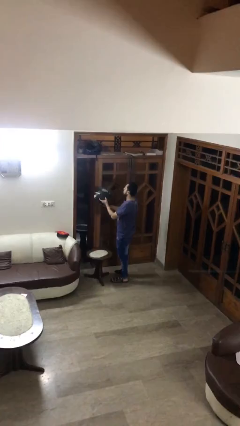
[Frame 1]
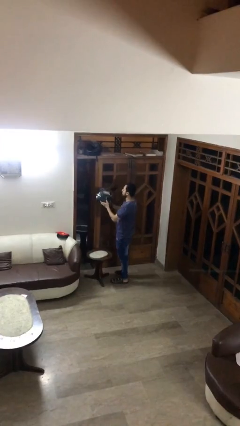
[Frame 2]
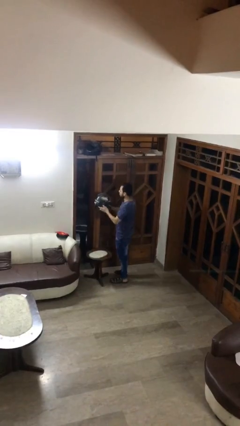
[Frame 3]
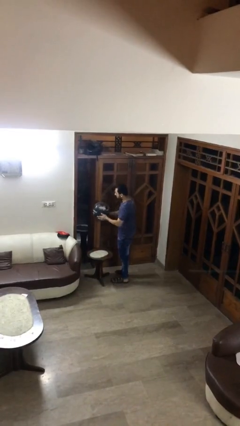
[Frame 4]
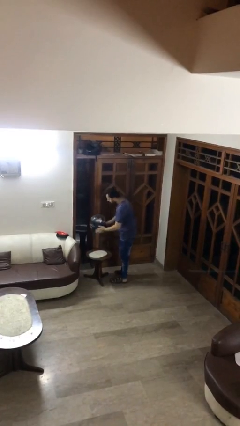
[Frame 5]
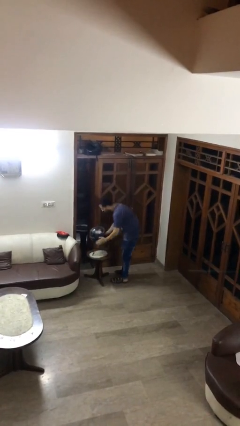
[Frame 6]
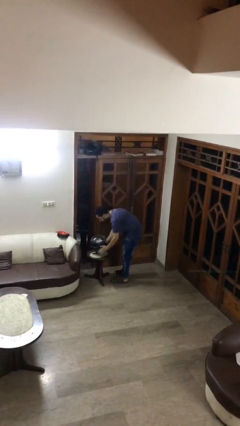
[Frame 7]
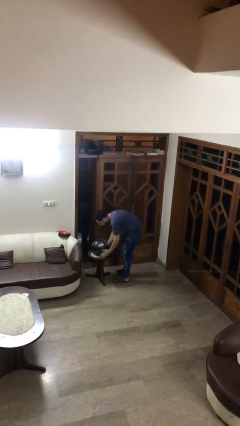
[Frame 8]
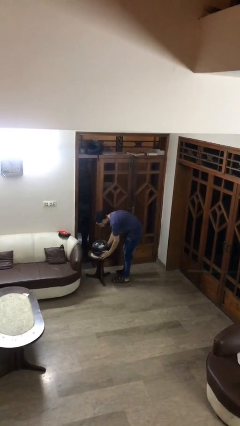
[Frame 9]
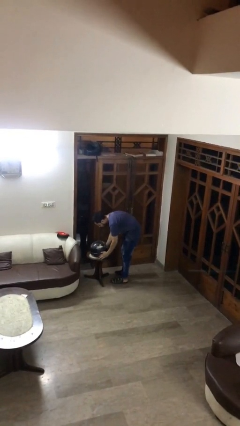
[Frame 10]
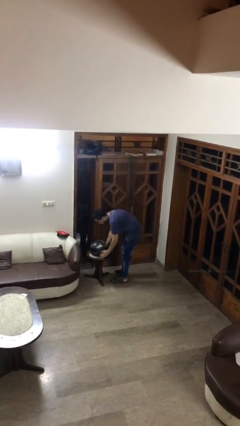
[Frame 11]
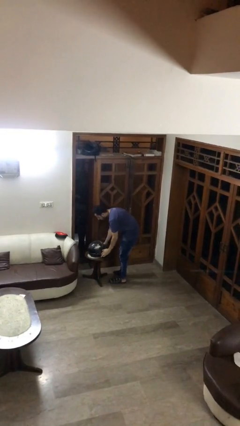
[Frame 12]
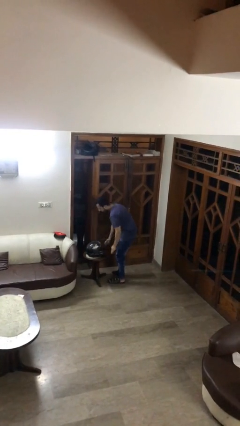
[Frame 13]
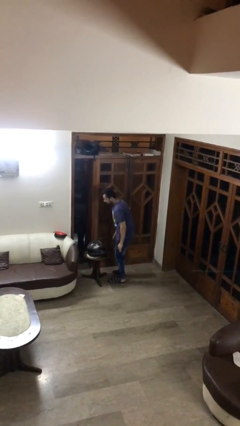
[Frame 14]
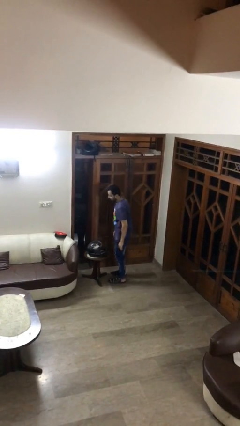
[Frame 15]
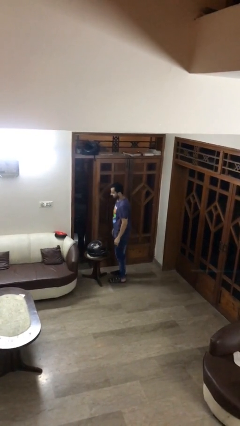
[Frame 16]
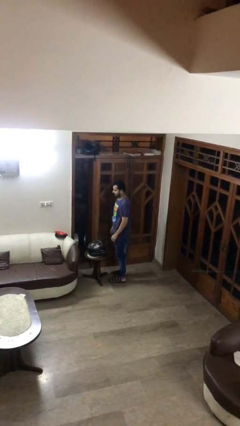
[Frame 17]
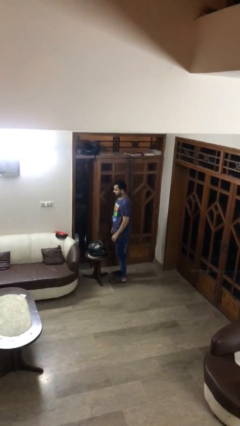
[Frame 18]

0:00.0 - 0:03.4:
person puts down object on table

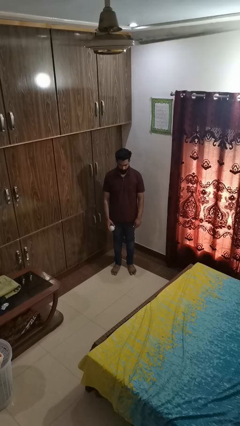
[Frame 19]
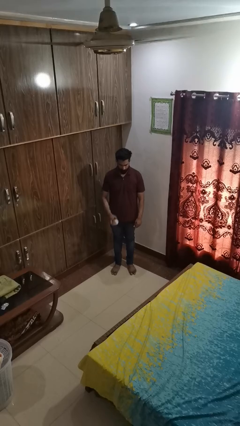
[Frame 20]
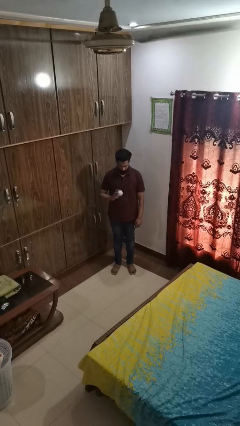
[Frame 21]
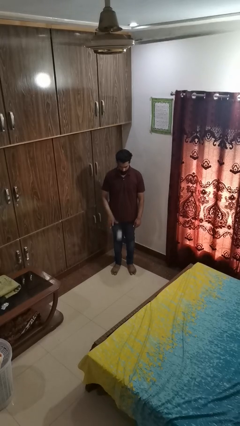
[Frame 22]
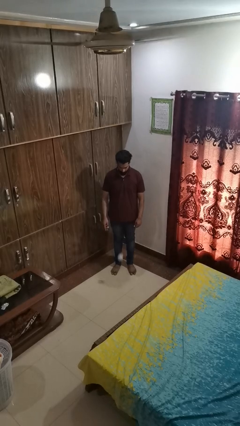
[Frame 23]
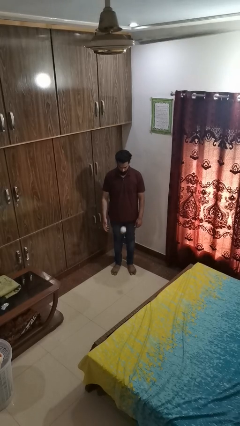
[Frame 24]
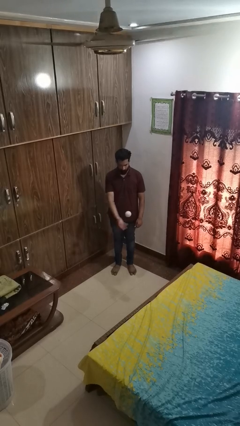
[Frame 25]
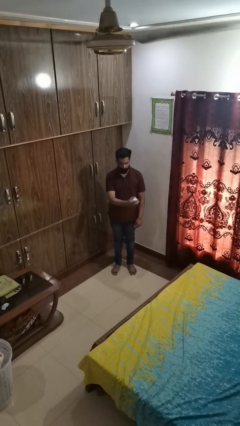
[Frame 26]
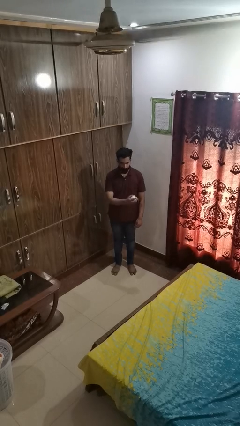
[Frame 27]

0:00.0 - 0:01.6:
person bounces ball on floor

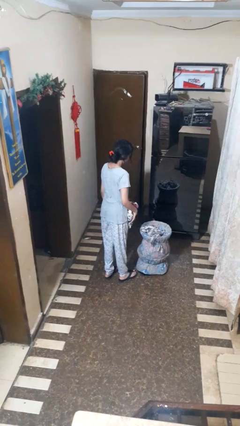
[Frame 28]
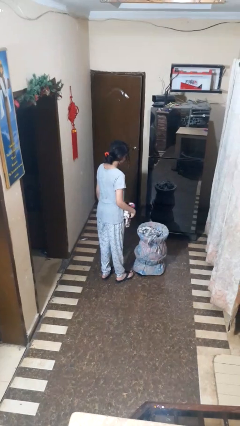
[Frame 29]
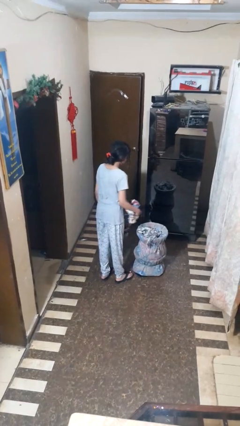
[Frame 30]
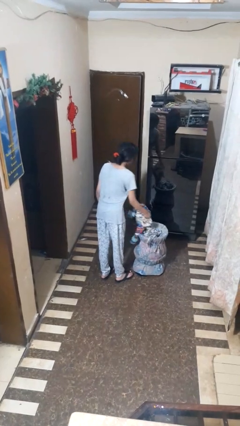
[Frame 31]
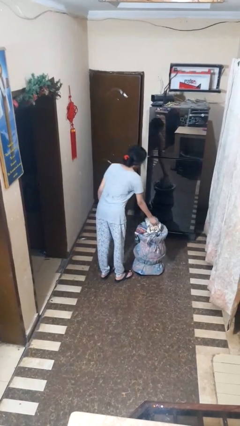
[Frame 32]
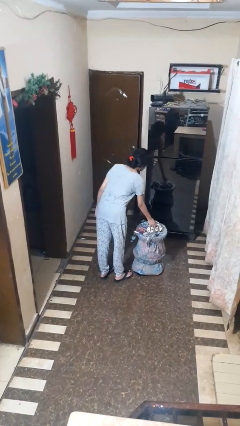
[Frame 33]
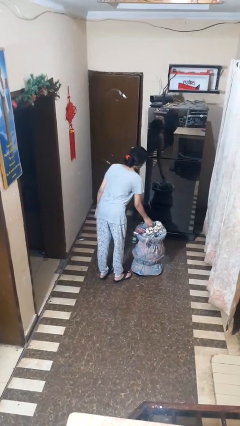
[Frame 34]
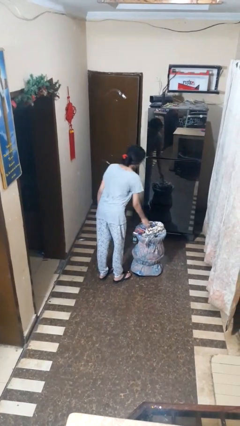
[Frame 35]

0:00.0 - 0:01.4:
person puts object into basket

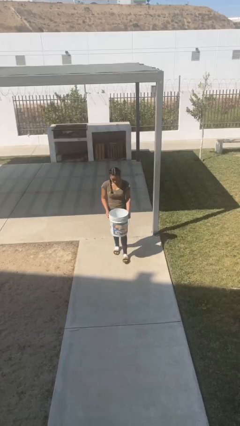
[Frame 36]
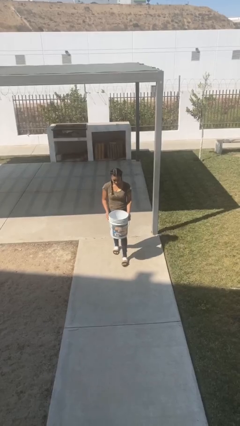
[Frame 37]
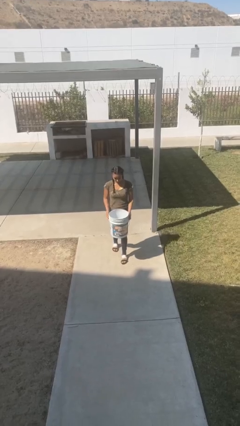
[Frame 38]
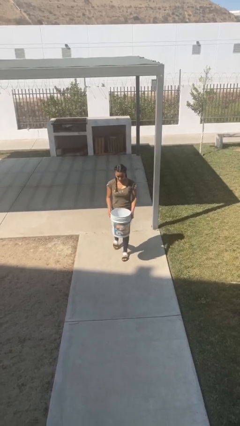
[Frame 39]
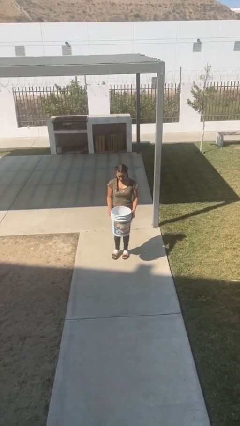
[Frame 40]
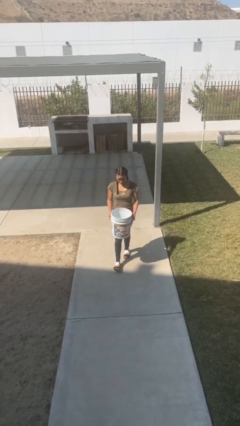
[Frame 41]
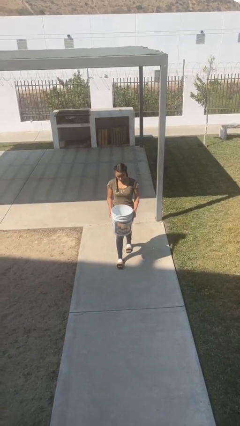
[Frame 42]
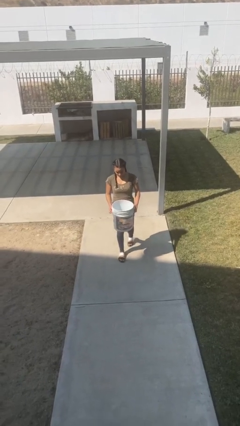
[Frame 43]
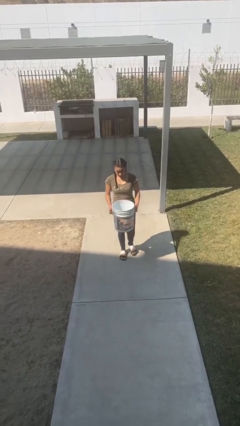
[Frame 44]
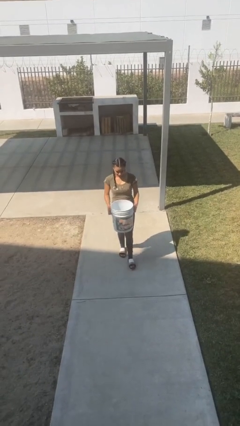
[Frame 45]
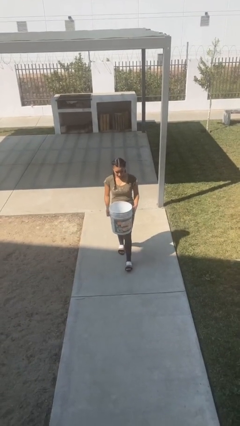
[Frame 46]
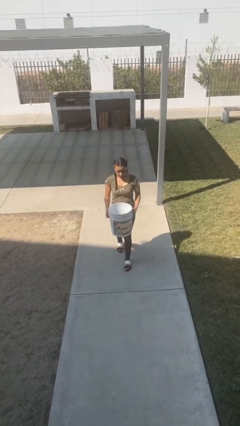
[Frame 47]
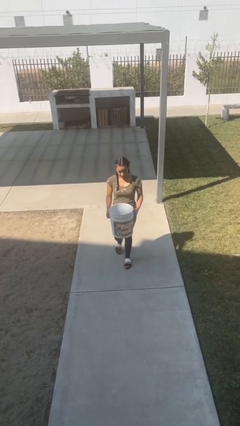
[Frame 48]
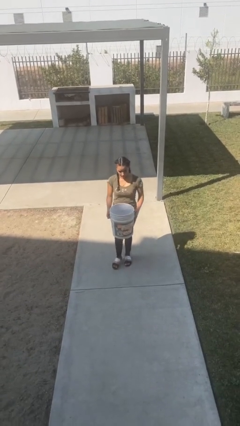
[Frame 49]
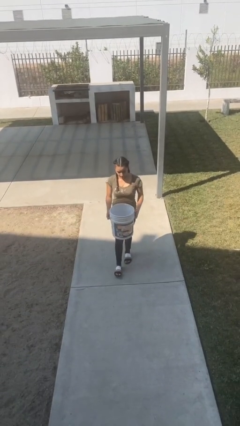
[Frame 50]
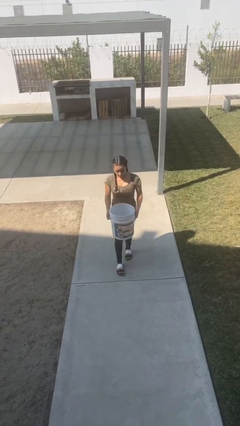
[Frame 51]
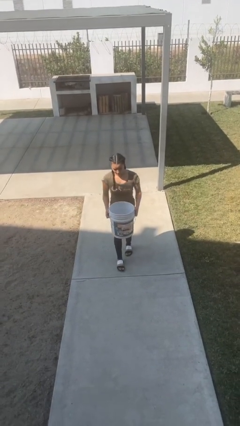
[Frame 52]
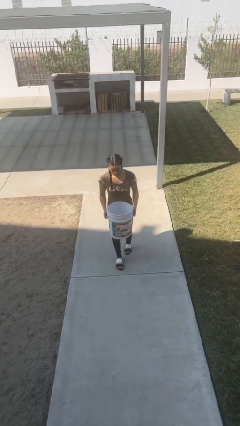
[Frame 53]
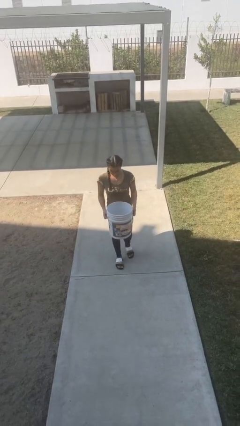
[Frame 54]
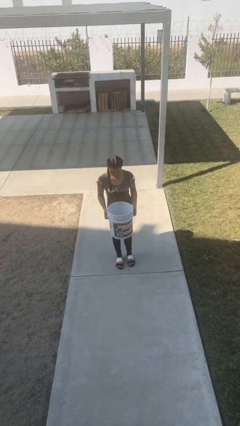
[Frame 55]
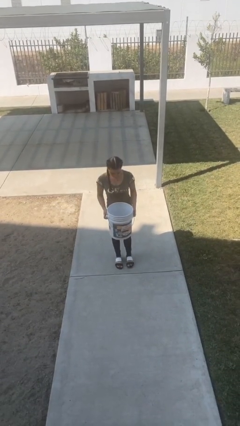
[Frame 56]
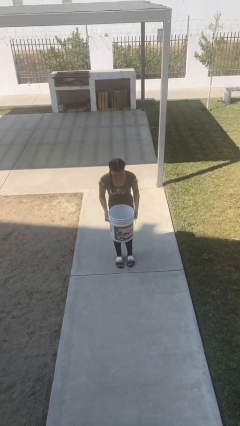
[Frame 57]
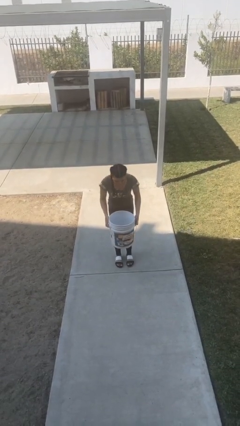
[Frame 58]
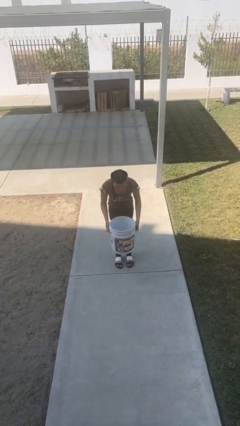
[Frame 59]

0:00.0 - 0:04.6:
person carries heavy object

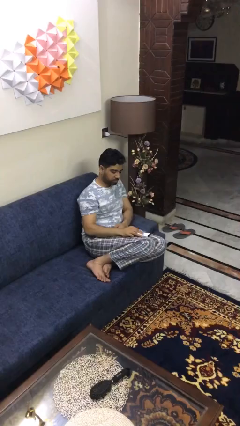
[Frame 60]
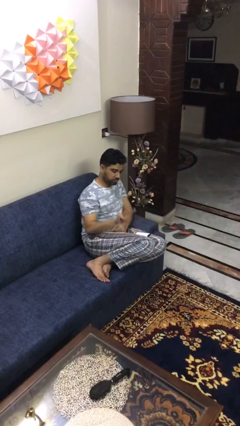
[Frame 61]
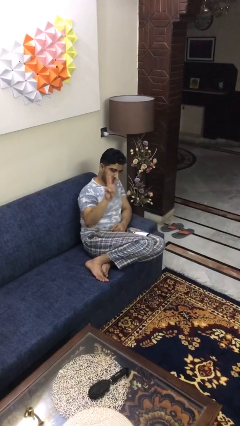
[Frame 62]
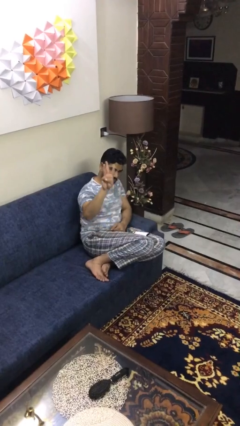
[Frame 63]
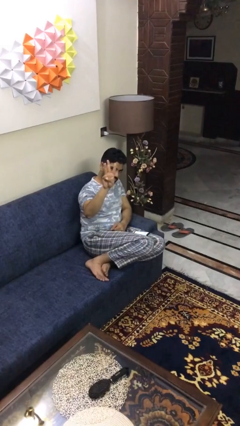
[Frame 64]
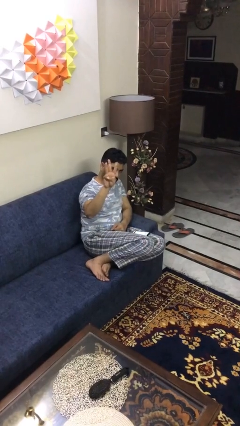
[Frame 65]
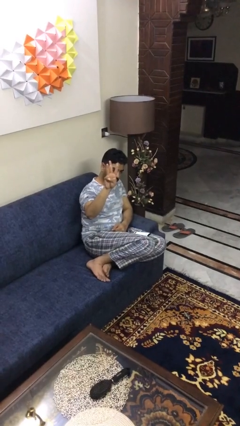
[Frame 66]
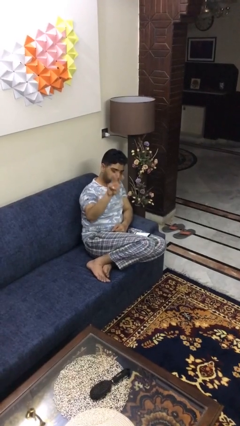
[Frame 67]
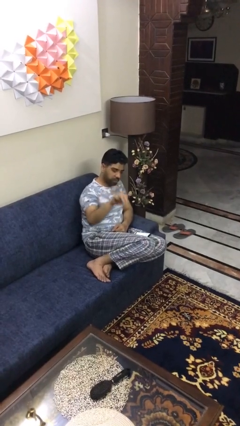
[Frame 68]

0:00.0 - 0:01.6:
person gestures number three

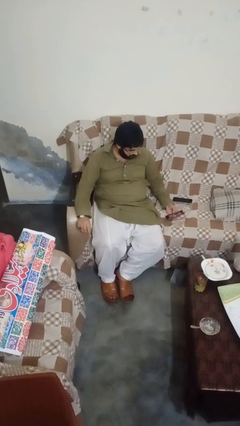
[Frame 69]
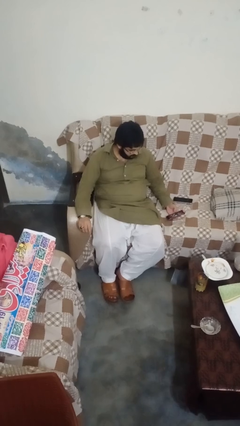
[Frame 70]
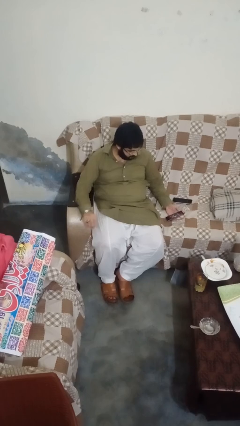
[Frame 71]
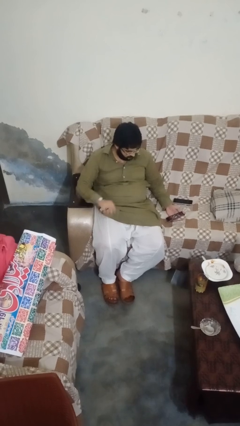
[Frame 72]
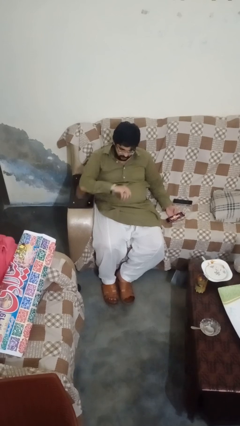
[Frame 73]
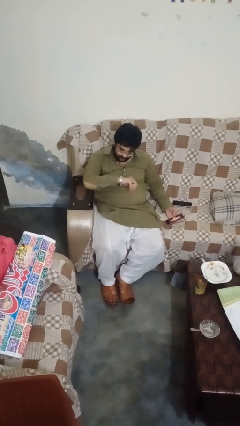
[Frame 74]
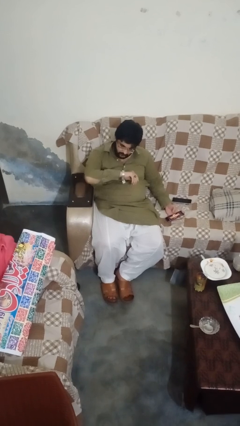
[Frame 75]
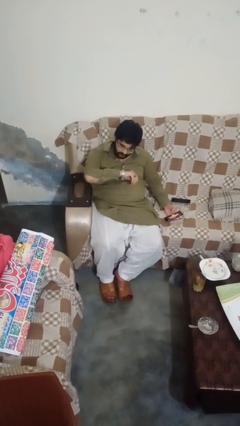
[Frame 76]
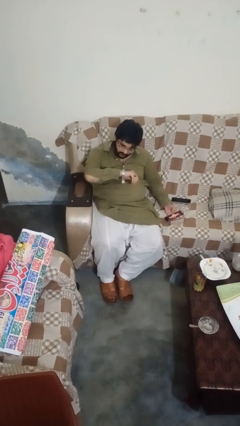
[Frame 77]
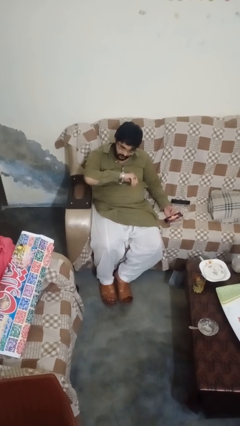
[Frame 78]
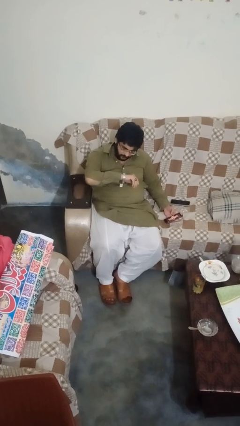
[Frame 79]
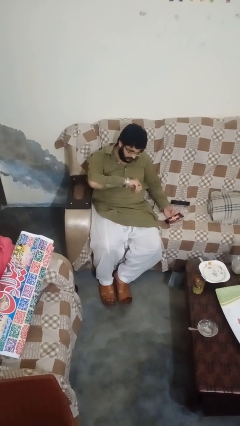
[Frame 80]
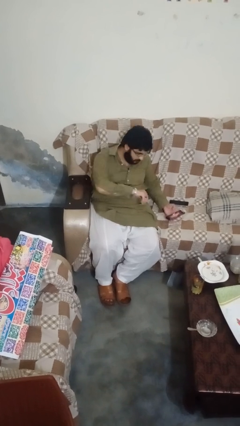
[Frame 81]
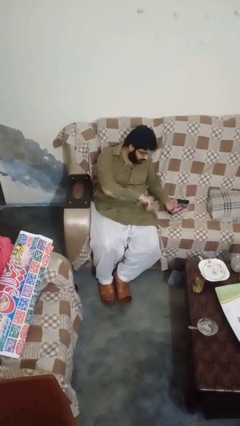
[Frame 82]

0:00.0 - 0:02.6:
person looks at wristwatch

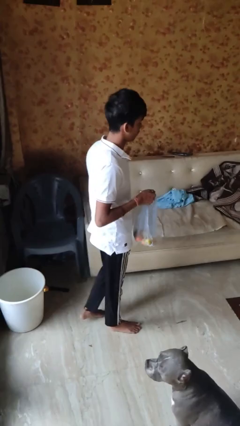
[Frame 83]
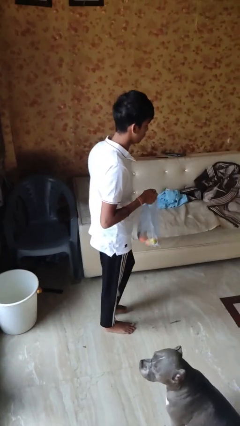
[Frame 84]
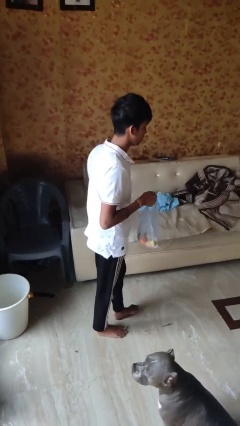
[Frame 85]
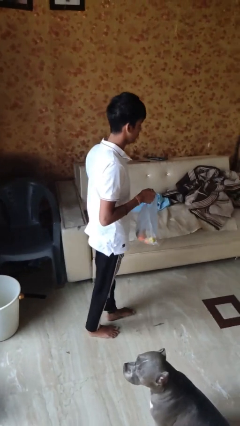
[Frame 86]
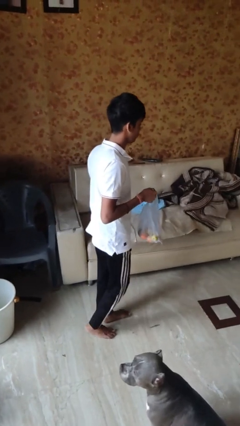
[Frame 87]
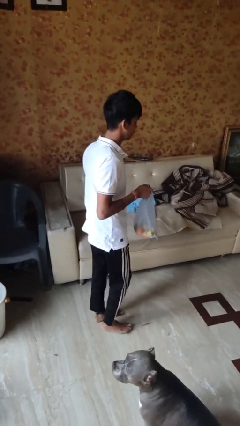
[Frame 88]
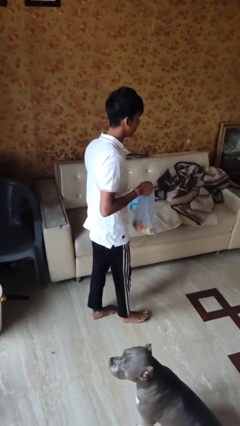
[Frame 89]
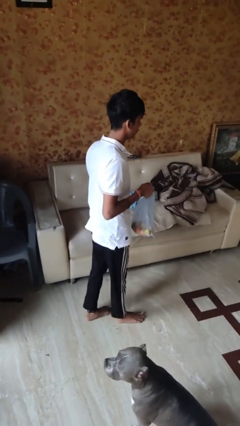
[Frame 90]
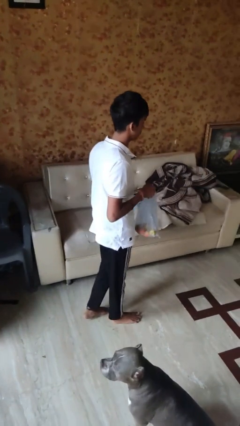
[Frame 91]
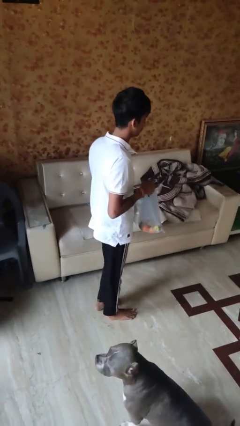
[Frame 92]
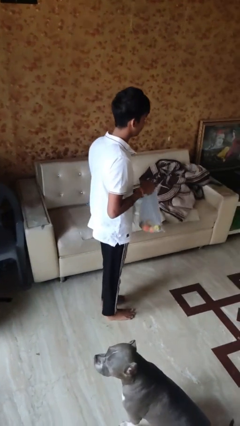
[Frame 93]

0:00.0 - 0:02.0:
person carries groceries
